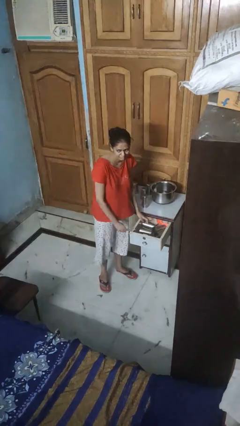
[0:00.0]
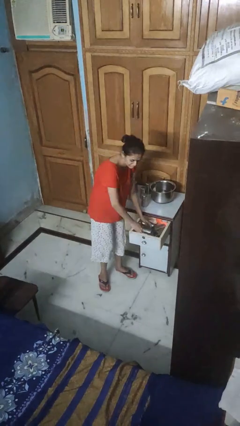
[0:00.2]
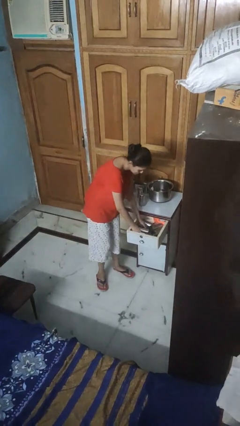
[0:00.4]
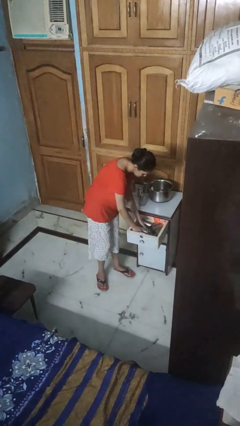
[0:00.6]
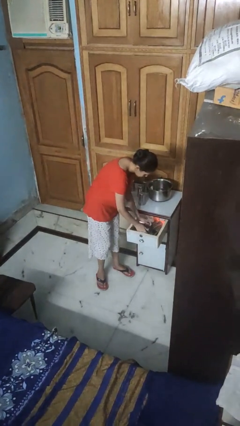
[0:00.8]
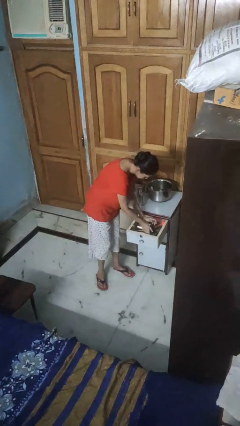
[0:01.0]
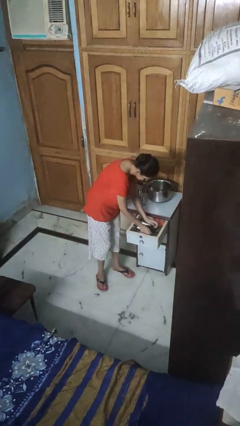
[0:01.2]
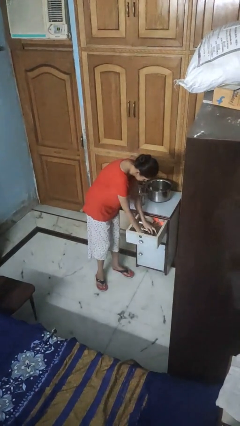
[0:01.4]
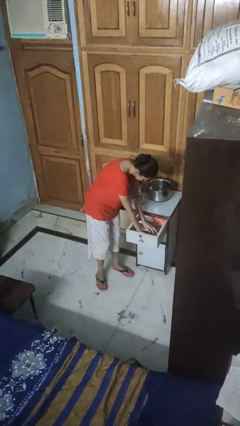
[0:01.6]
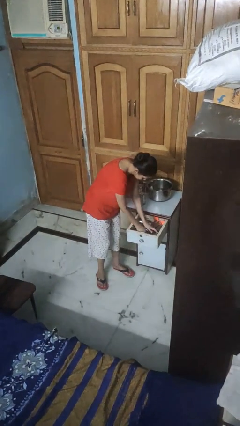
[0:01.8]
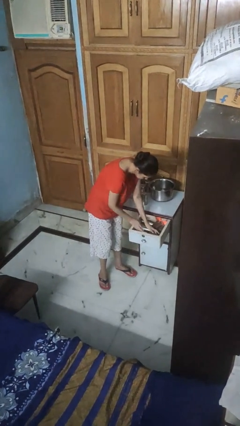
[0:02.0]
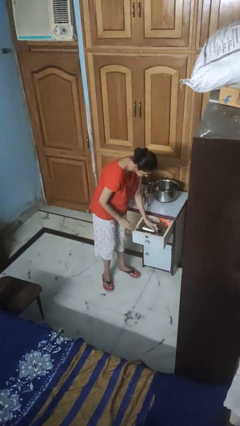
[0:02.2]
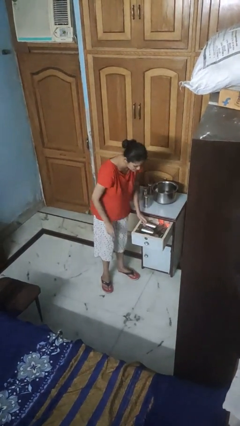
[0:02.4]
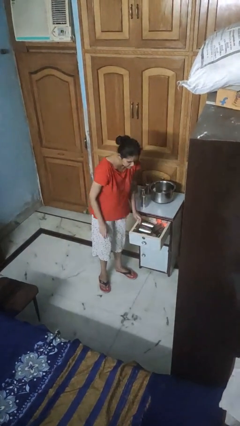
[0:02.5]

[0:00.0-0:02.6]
person searches in kitchen drawer

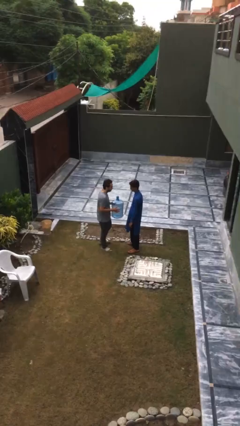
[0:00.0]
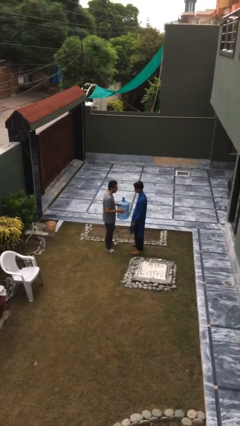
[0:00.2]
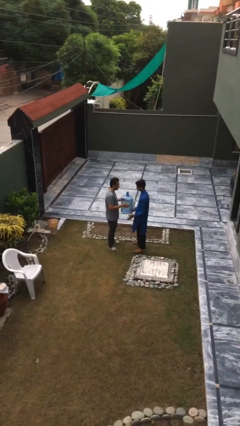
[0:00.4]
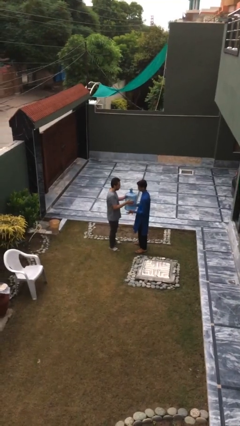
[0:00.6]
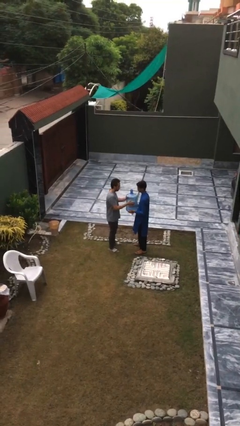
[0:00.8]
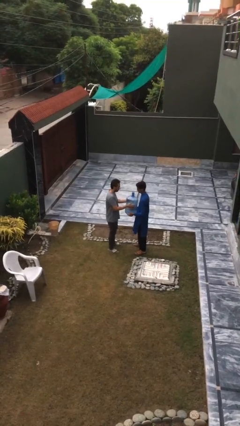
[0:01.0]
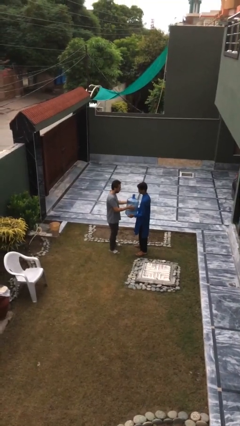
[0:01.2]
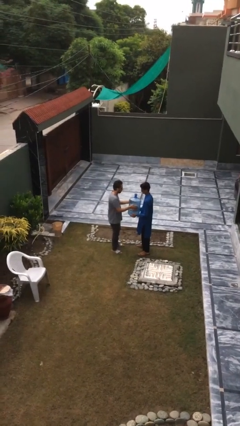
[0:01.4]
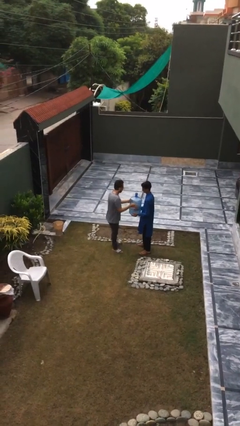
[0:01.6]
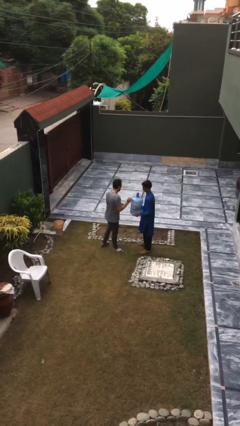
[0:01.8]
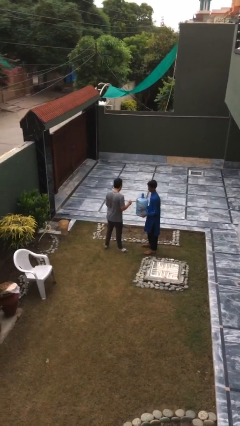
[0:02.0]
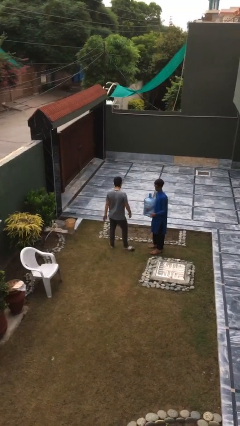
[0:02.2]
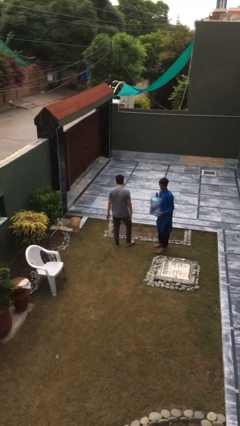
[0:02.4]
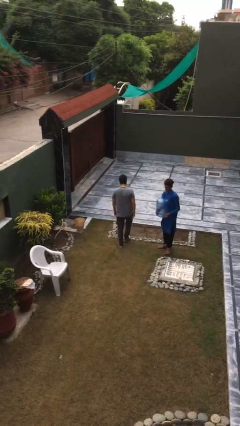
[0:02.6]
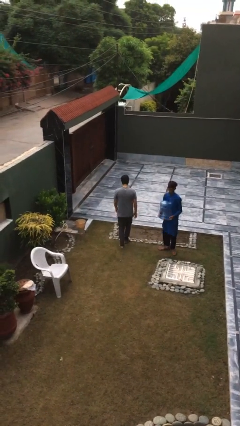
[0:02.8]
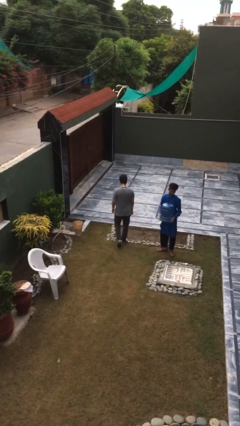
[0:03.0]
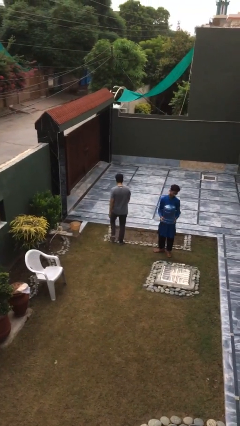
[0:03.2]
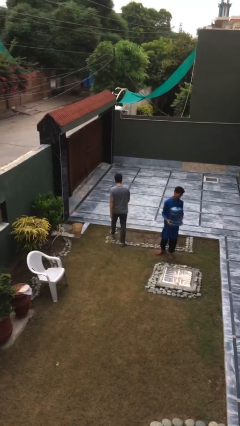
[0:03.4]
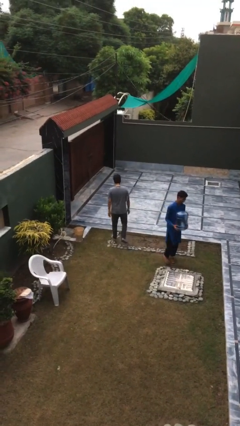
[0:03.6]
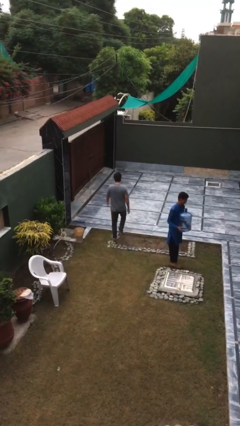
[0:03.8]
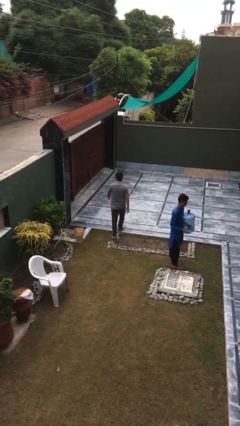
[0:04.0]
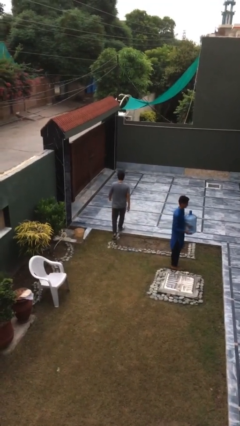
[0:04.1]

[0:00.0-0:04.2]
person transfers object to person

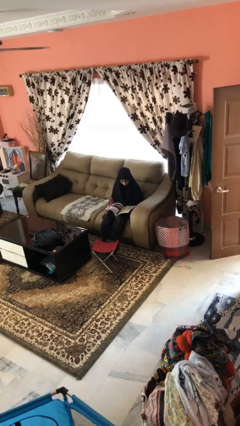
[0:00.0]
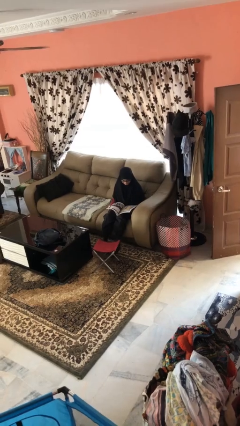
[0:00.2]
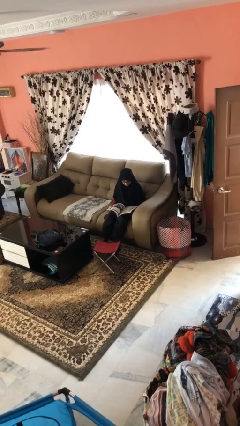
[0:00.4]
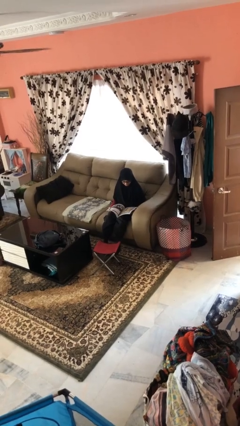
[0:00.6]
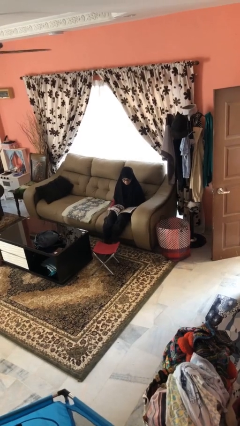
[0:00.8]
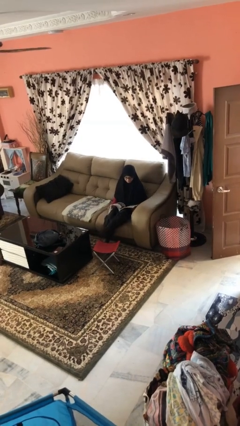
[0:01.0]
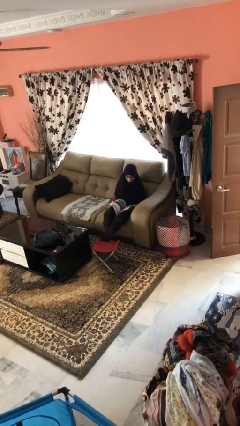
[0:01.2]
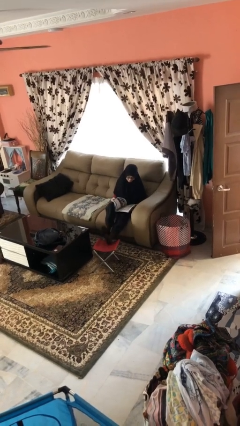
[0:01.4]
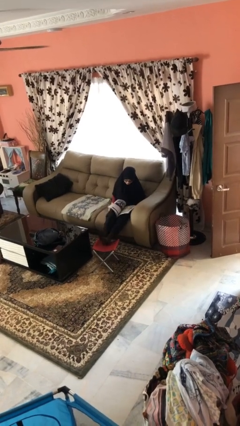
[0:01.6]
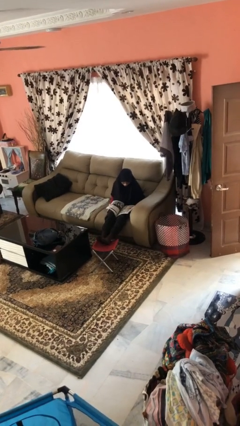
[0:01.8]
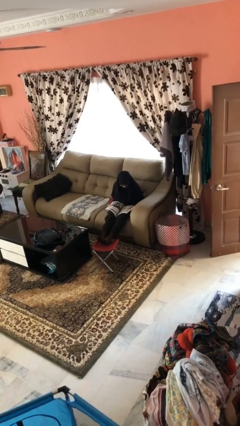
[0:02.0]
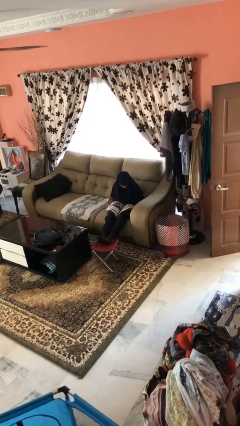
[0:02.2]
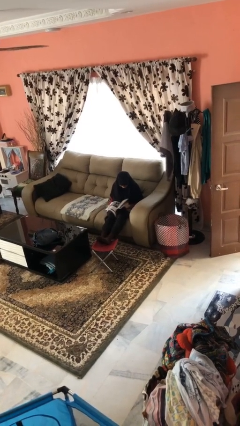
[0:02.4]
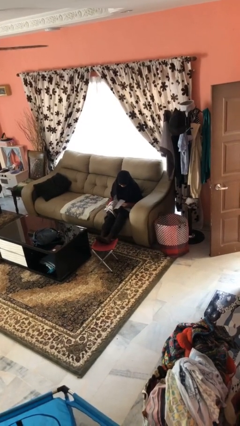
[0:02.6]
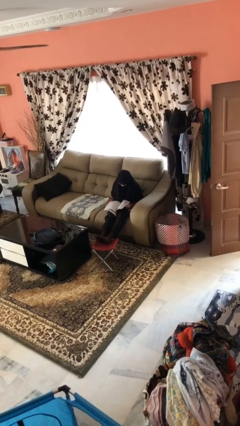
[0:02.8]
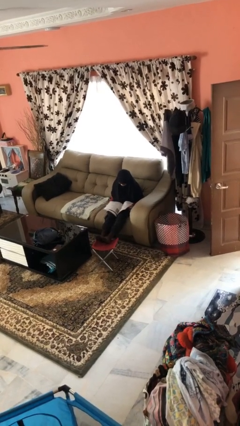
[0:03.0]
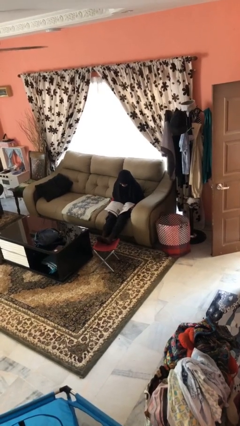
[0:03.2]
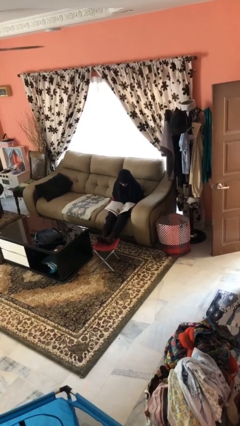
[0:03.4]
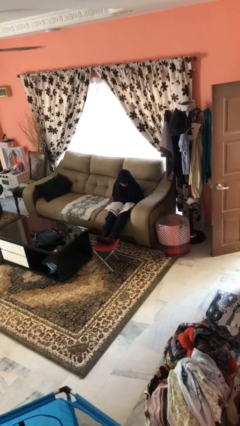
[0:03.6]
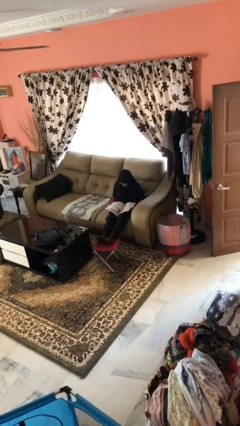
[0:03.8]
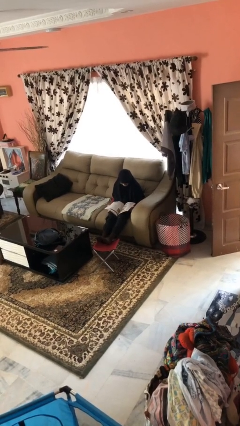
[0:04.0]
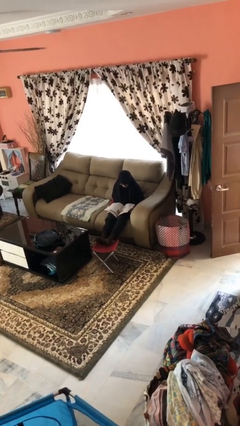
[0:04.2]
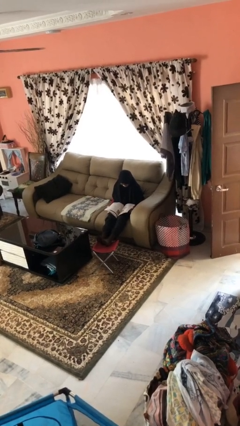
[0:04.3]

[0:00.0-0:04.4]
person puts feet up

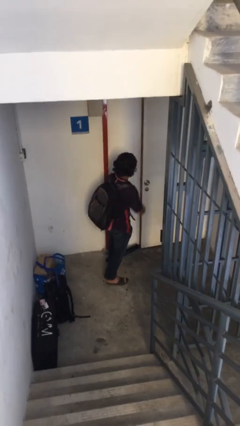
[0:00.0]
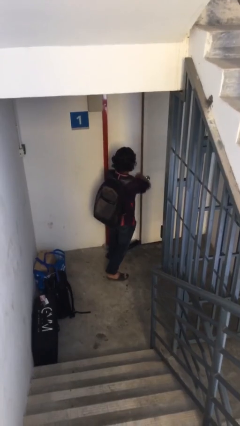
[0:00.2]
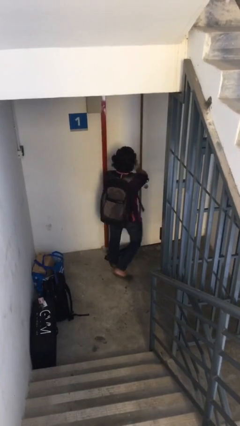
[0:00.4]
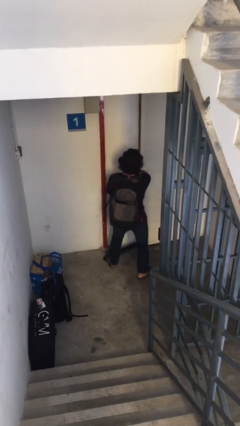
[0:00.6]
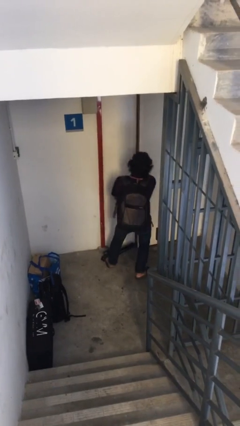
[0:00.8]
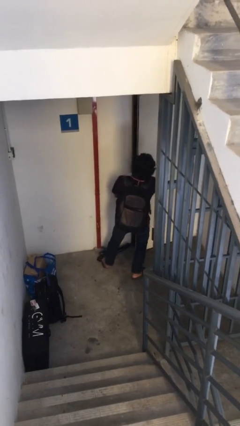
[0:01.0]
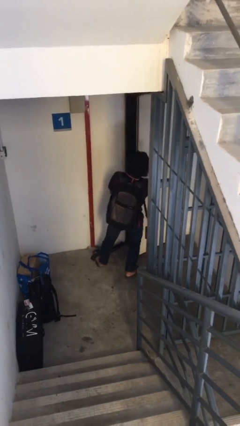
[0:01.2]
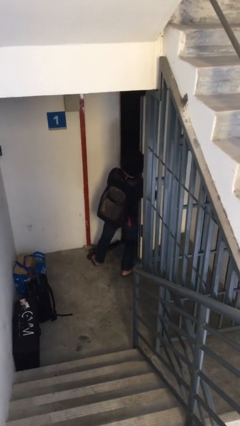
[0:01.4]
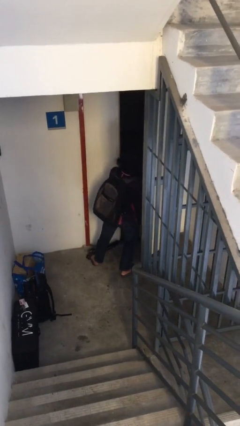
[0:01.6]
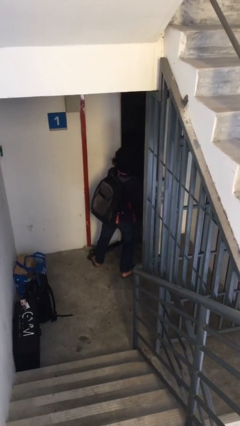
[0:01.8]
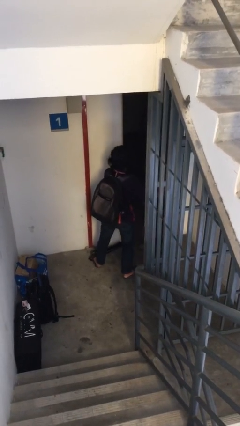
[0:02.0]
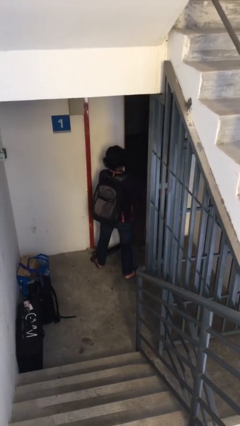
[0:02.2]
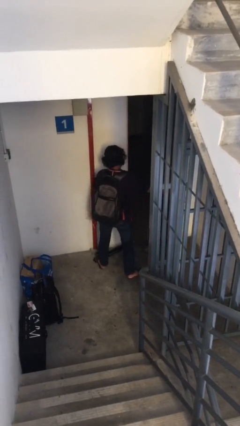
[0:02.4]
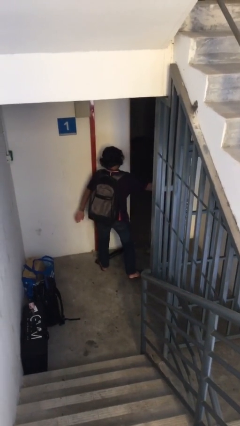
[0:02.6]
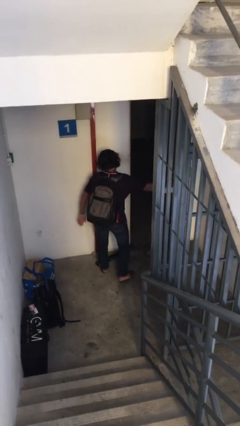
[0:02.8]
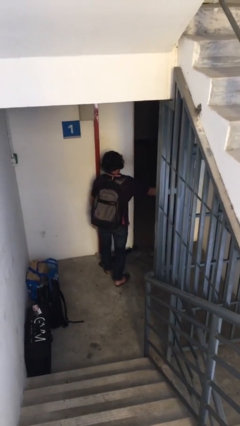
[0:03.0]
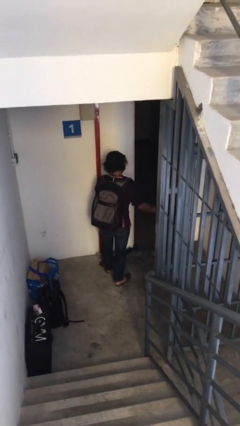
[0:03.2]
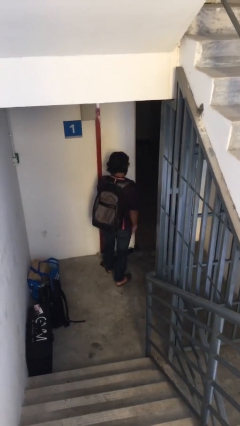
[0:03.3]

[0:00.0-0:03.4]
person opens facility door

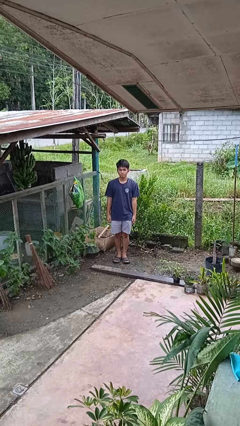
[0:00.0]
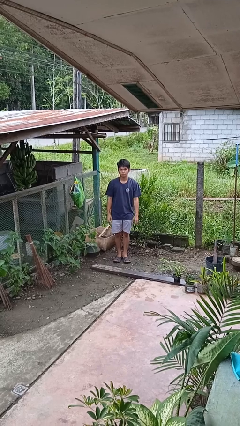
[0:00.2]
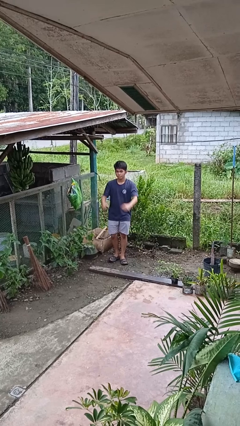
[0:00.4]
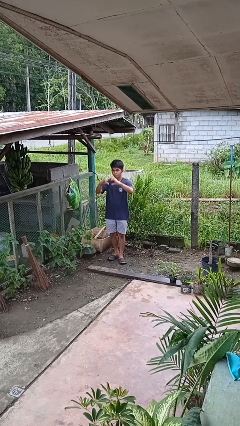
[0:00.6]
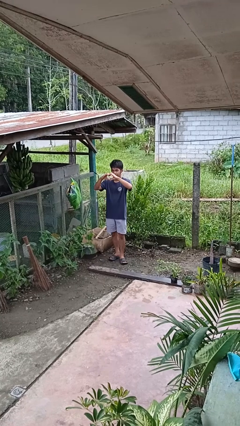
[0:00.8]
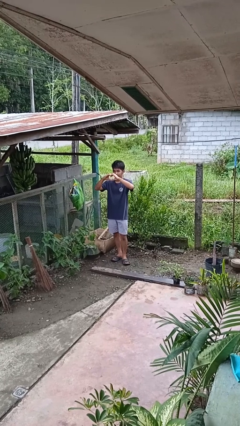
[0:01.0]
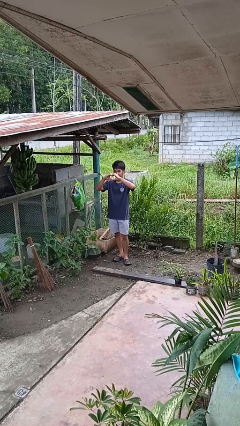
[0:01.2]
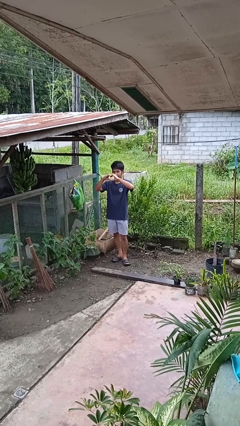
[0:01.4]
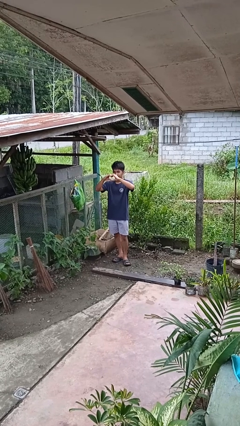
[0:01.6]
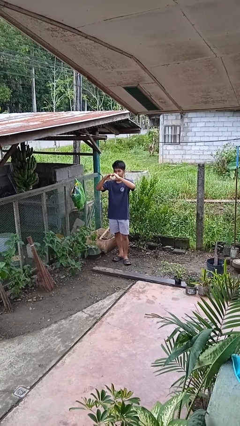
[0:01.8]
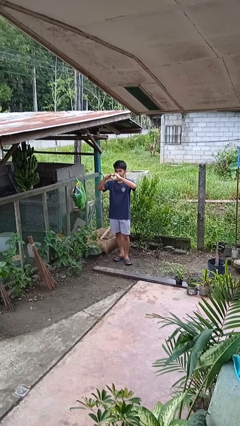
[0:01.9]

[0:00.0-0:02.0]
person gestures heart

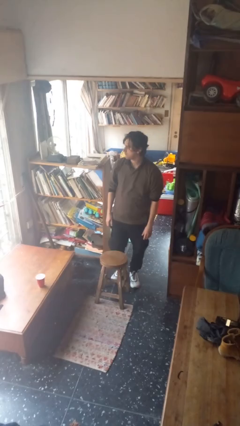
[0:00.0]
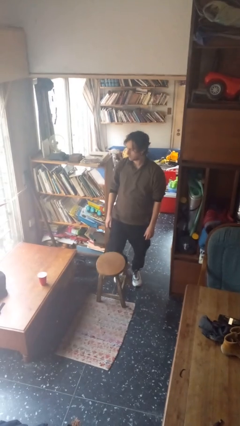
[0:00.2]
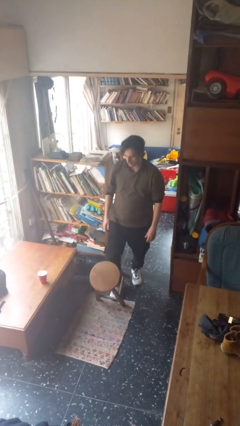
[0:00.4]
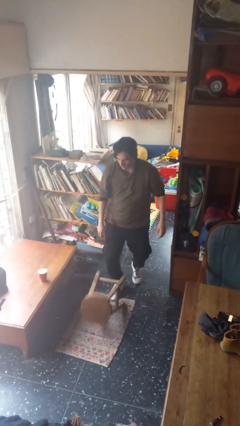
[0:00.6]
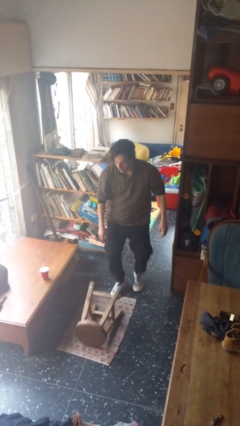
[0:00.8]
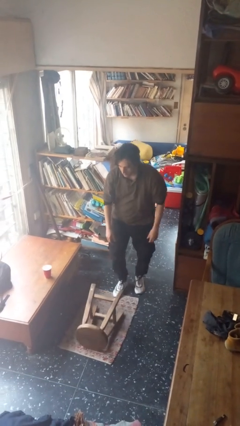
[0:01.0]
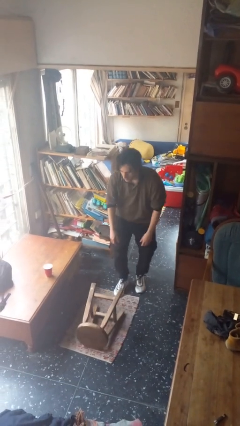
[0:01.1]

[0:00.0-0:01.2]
person knocks over furniture
